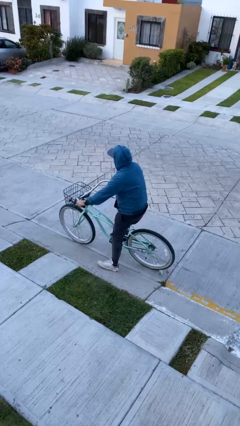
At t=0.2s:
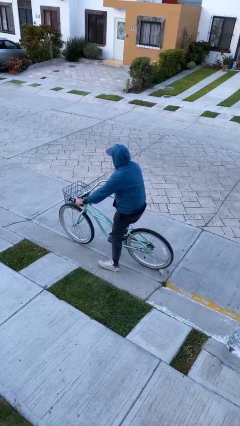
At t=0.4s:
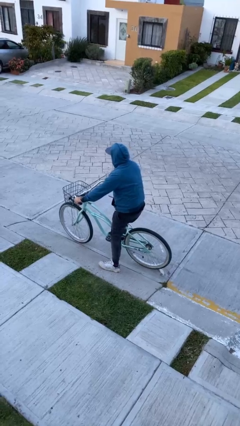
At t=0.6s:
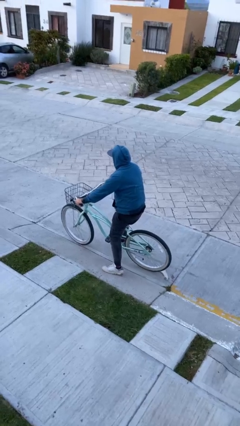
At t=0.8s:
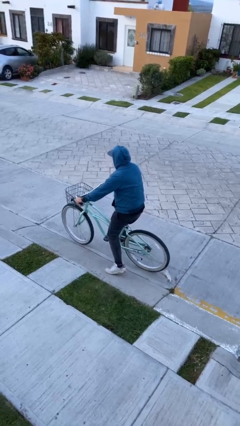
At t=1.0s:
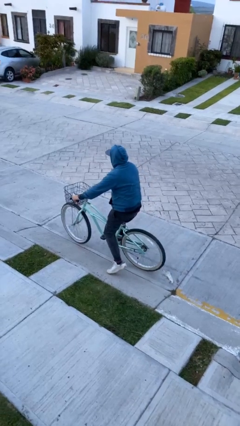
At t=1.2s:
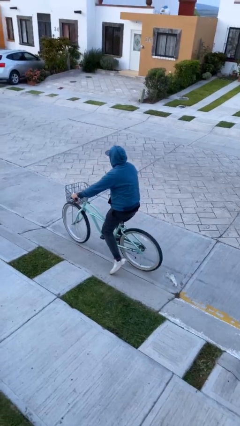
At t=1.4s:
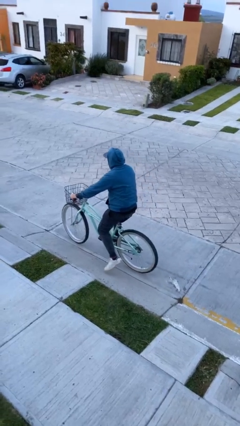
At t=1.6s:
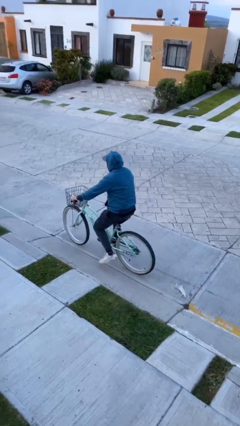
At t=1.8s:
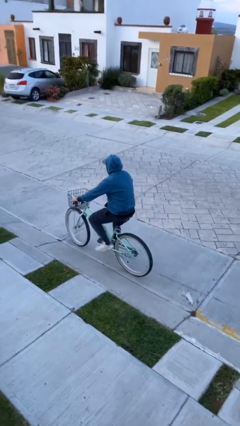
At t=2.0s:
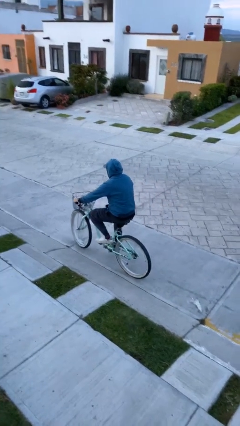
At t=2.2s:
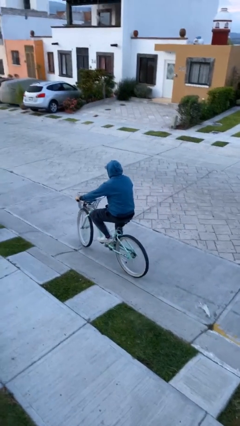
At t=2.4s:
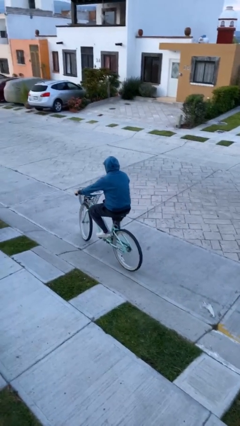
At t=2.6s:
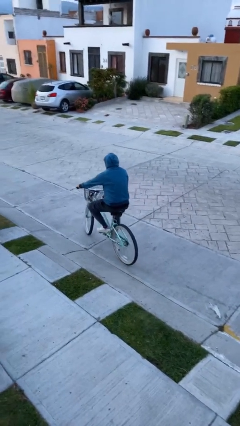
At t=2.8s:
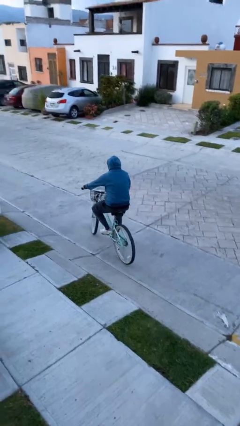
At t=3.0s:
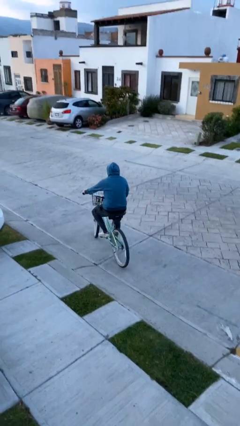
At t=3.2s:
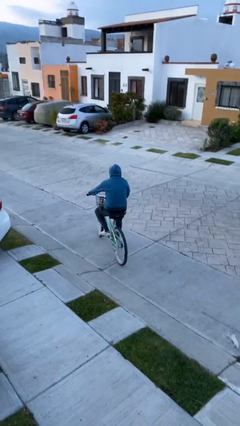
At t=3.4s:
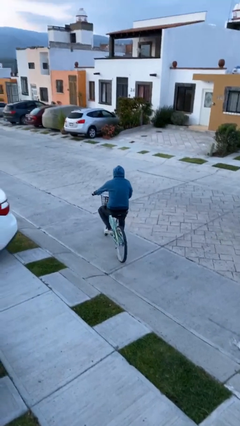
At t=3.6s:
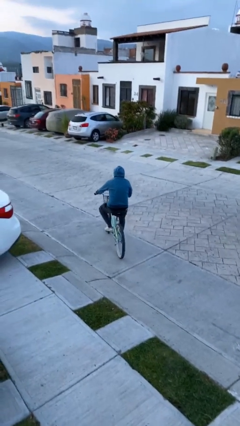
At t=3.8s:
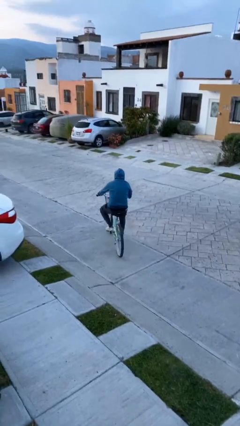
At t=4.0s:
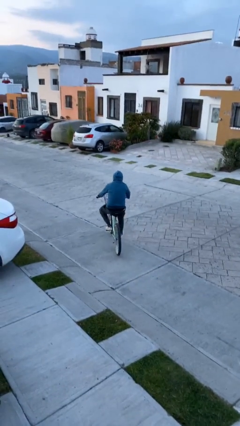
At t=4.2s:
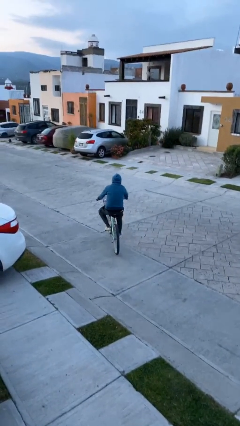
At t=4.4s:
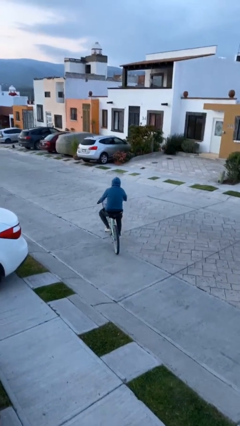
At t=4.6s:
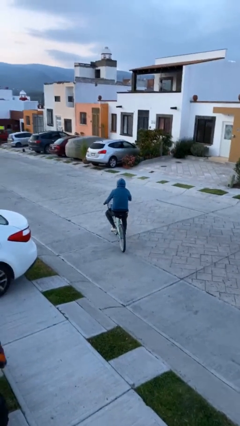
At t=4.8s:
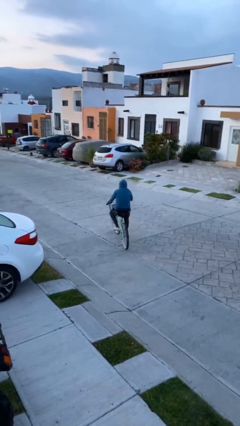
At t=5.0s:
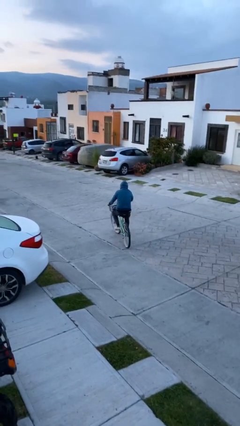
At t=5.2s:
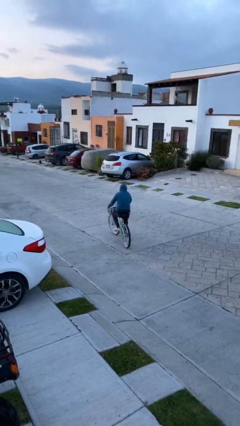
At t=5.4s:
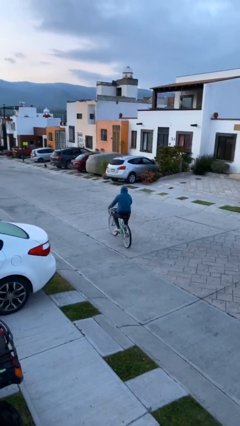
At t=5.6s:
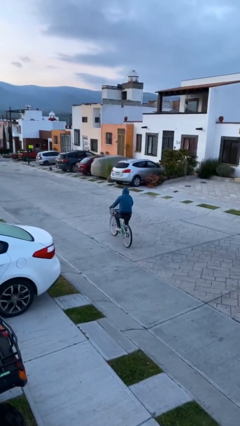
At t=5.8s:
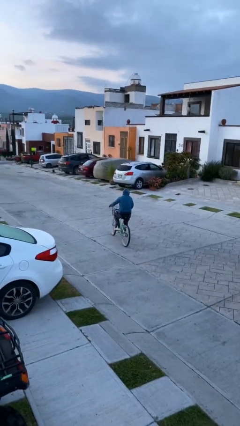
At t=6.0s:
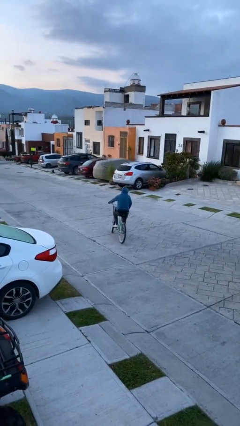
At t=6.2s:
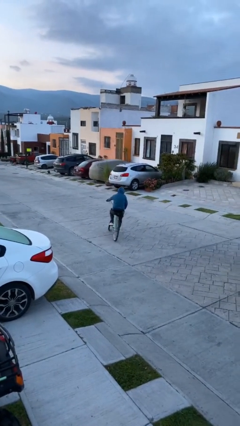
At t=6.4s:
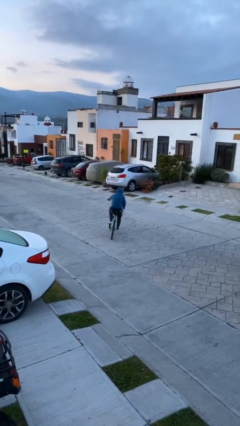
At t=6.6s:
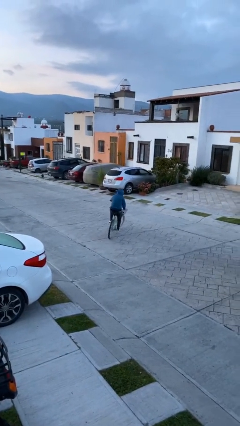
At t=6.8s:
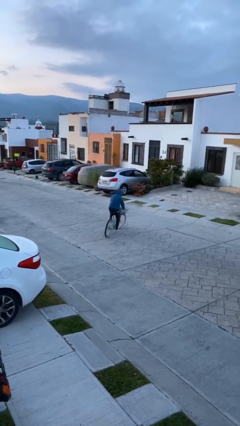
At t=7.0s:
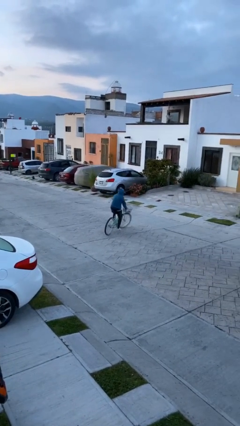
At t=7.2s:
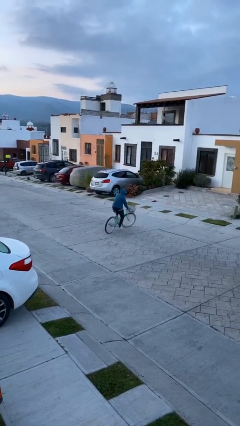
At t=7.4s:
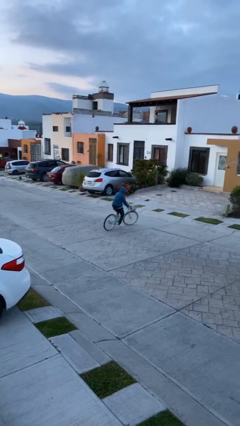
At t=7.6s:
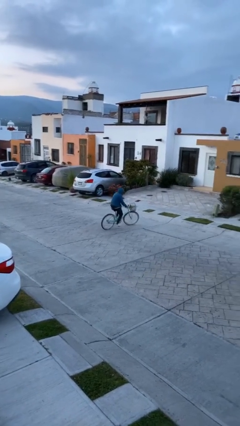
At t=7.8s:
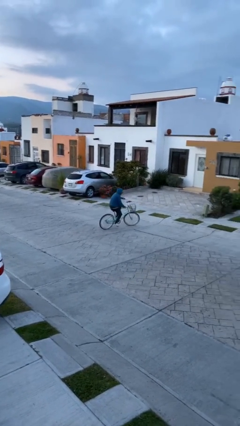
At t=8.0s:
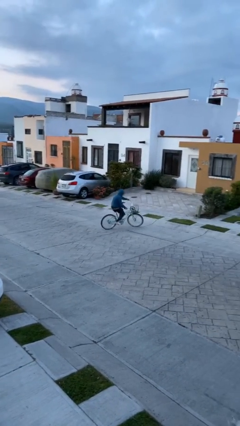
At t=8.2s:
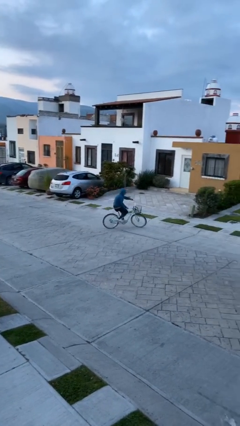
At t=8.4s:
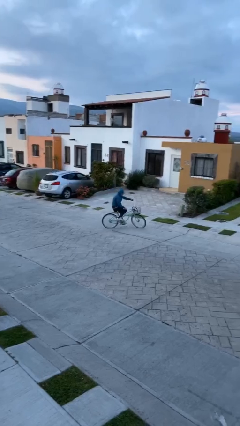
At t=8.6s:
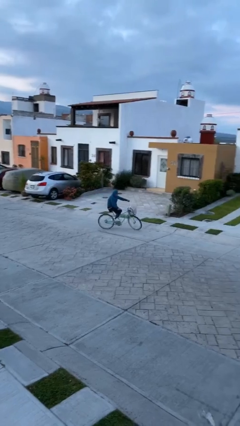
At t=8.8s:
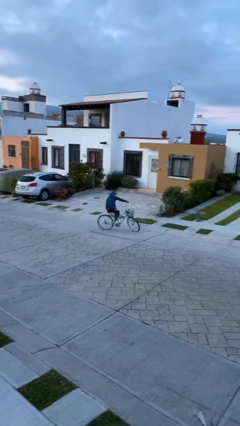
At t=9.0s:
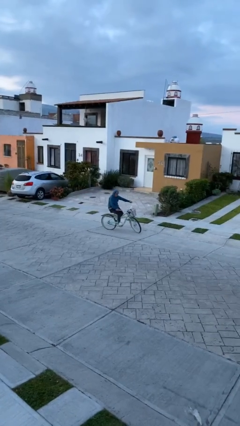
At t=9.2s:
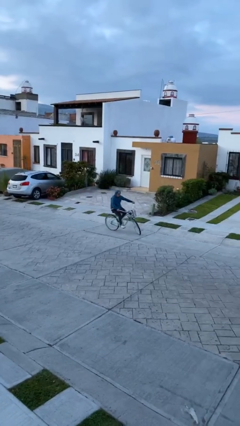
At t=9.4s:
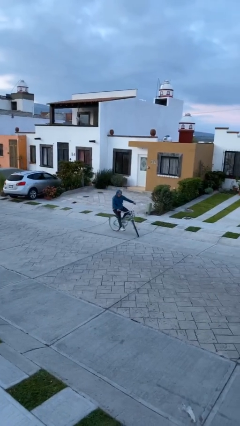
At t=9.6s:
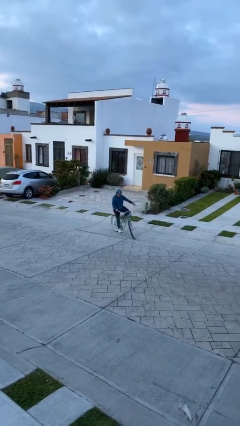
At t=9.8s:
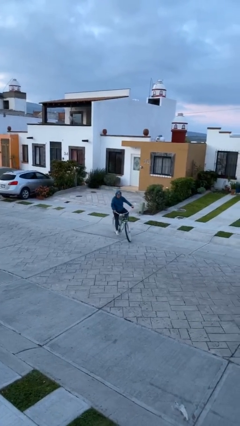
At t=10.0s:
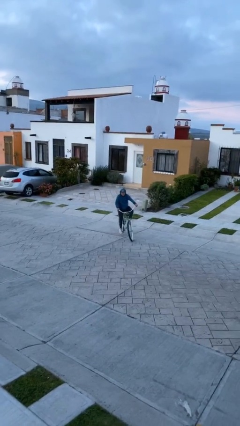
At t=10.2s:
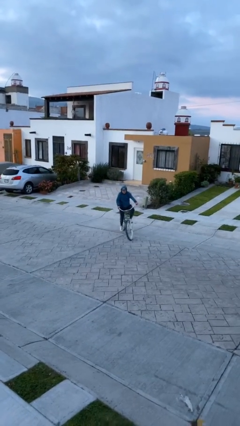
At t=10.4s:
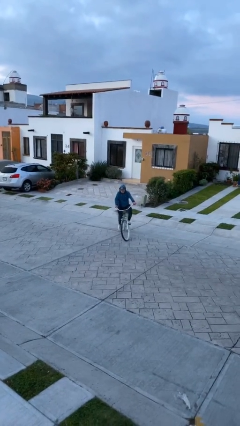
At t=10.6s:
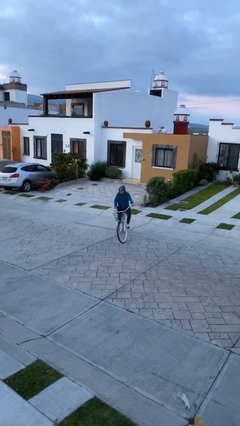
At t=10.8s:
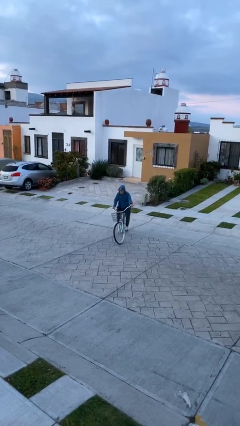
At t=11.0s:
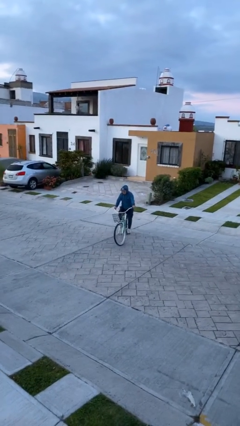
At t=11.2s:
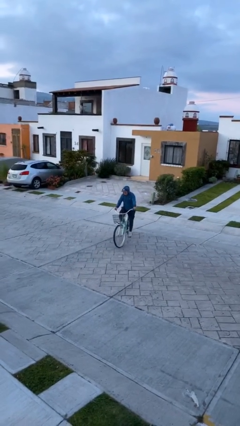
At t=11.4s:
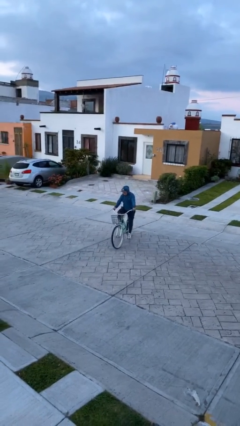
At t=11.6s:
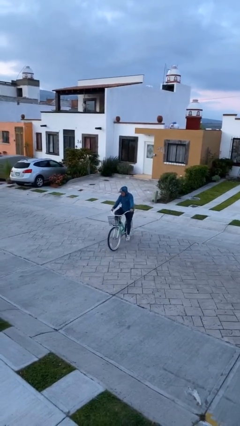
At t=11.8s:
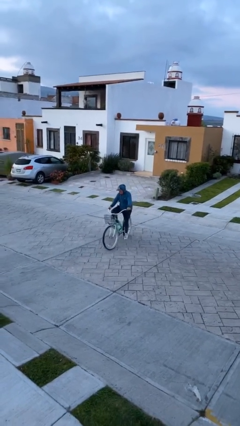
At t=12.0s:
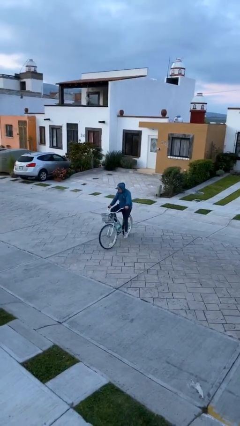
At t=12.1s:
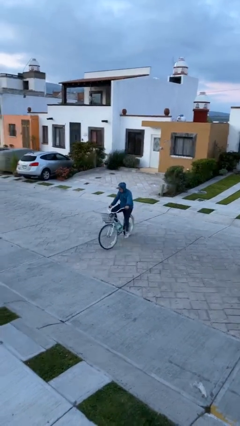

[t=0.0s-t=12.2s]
person rides bicycle

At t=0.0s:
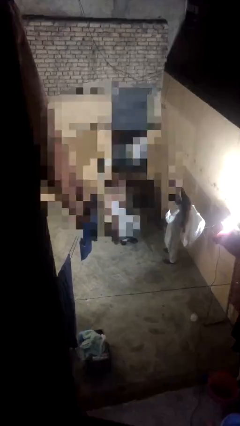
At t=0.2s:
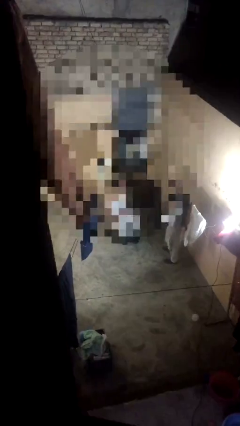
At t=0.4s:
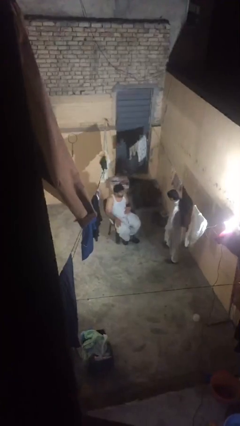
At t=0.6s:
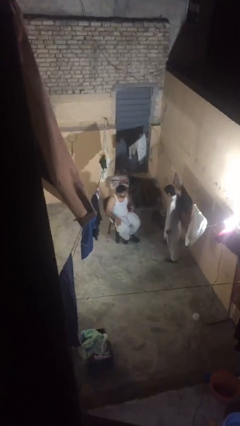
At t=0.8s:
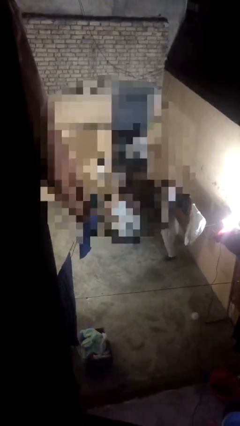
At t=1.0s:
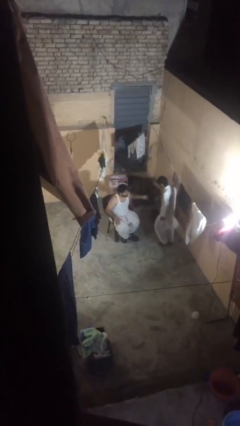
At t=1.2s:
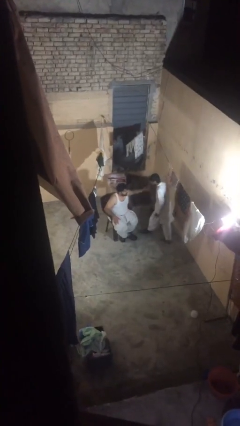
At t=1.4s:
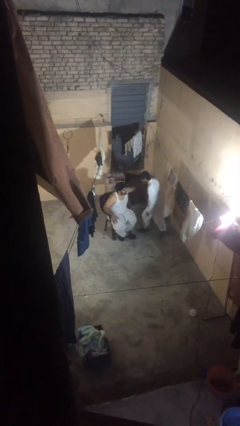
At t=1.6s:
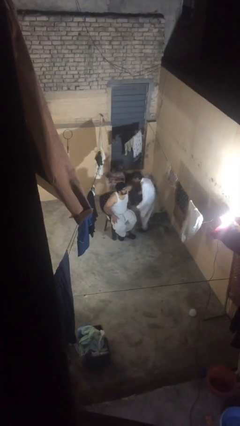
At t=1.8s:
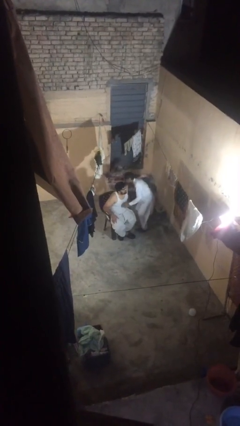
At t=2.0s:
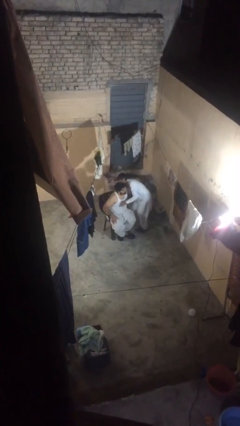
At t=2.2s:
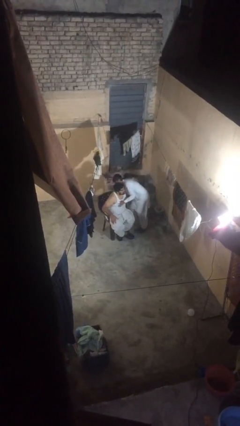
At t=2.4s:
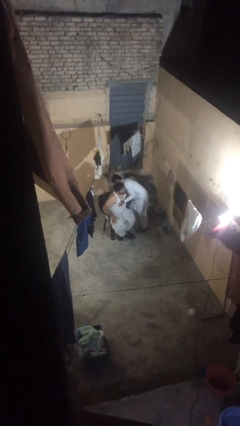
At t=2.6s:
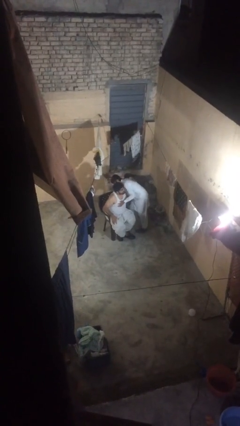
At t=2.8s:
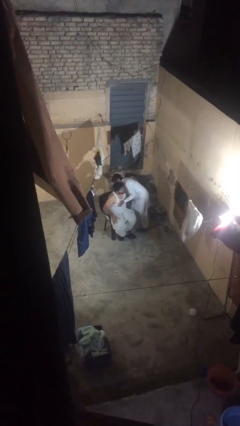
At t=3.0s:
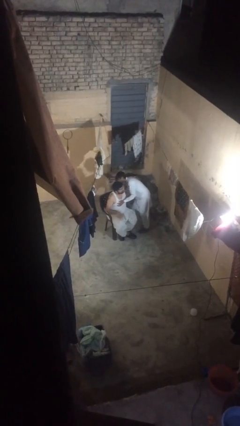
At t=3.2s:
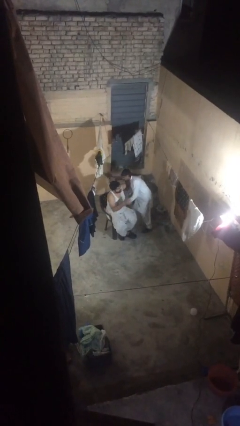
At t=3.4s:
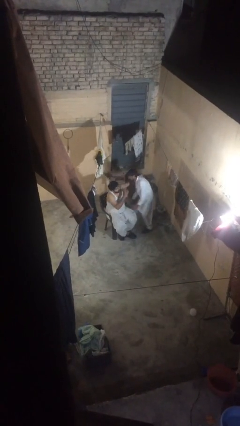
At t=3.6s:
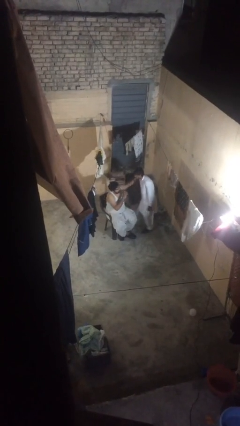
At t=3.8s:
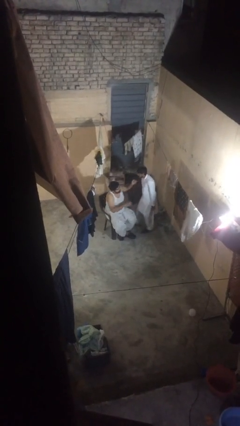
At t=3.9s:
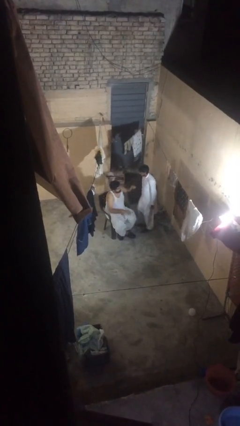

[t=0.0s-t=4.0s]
person embraces person

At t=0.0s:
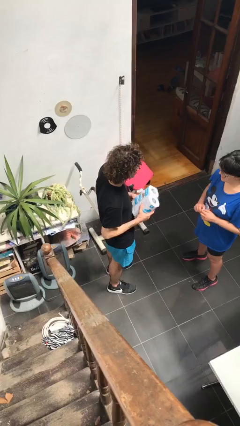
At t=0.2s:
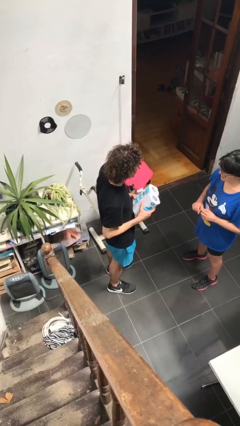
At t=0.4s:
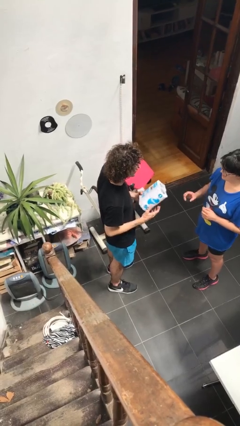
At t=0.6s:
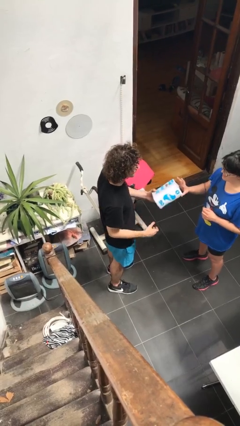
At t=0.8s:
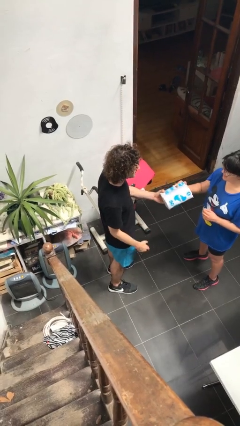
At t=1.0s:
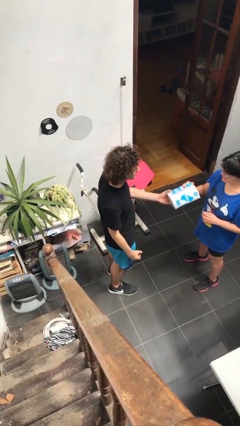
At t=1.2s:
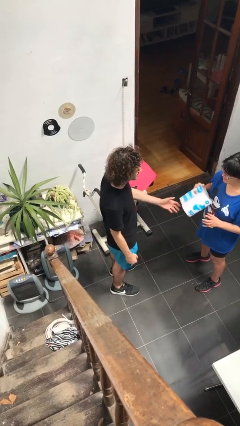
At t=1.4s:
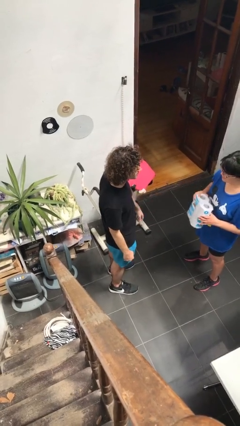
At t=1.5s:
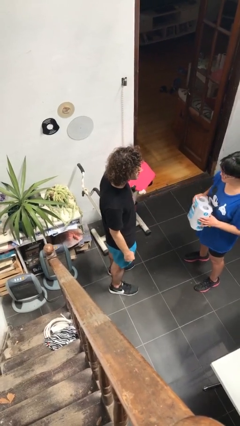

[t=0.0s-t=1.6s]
person transfers object to person
